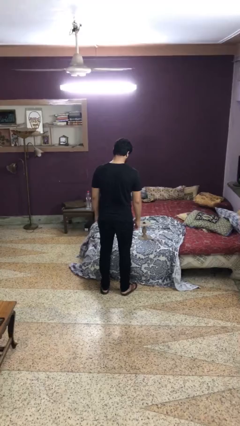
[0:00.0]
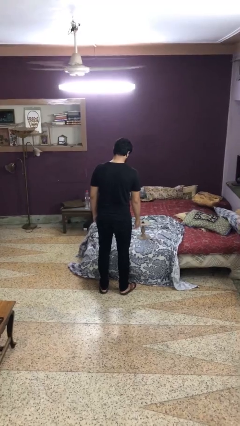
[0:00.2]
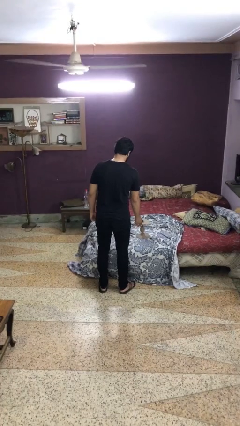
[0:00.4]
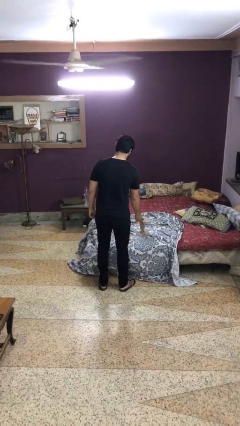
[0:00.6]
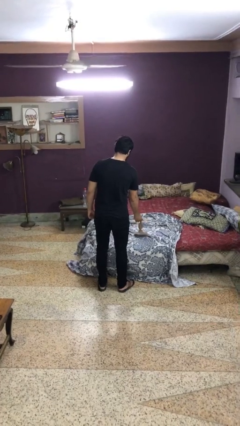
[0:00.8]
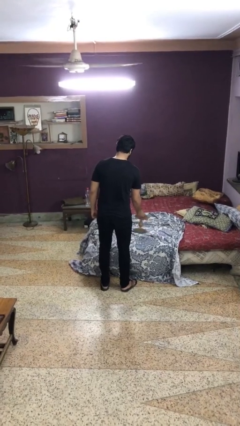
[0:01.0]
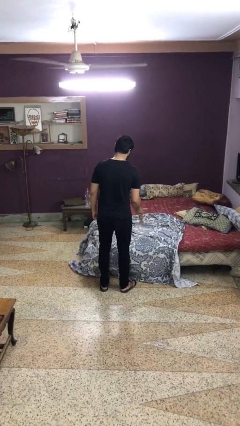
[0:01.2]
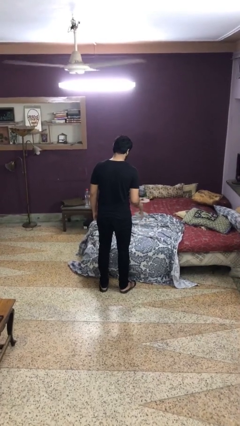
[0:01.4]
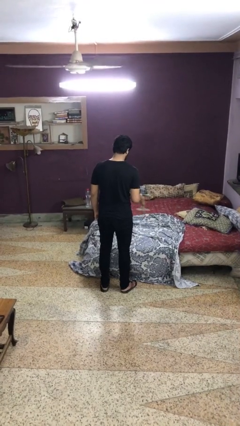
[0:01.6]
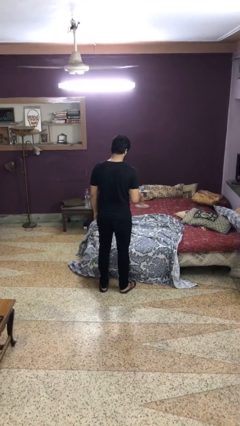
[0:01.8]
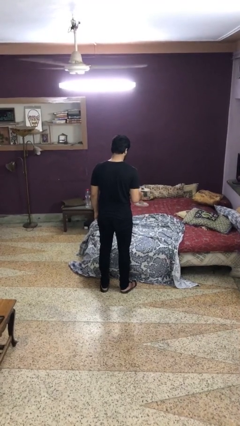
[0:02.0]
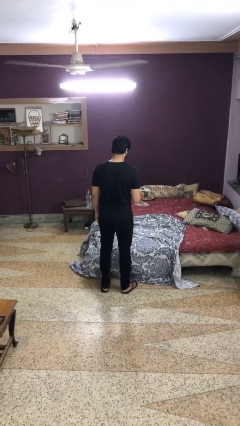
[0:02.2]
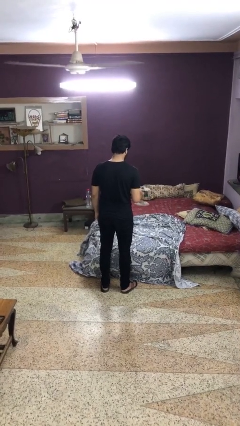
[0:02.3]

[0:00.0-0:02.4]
person picks up object from bed

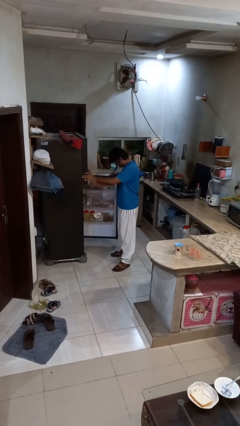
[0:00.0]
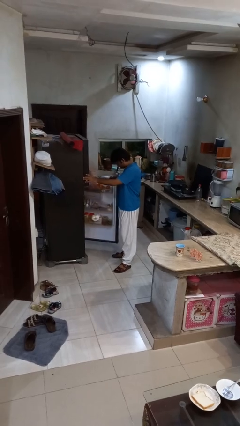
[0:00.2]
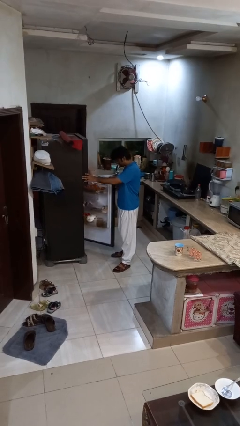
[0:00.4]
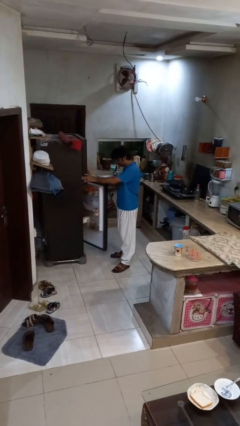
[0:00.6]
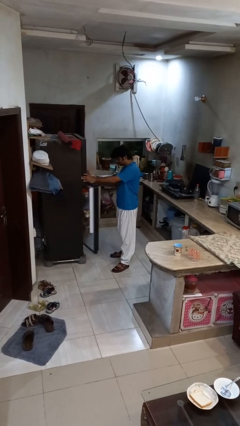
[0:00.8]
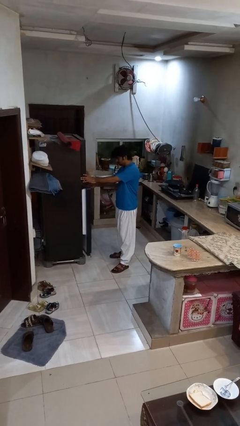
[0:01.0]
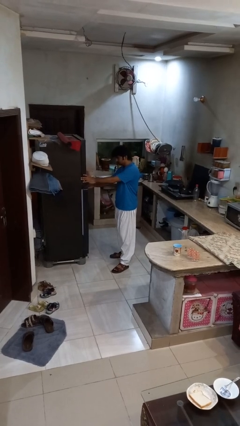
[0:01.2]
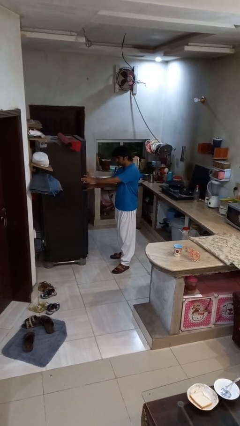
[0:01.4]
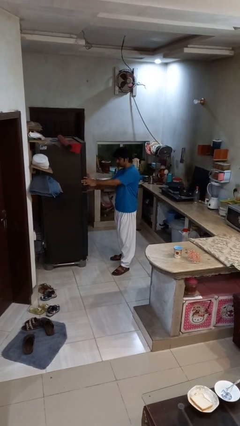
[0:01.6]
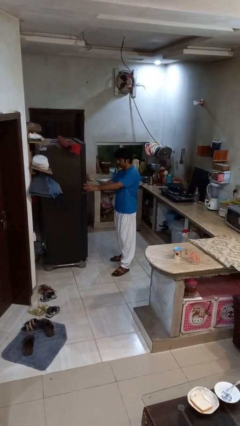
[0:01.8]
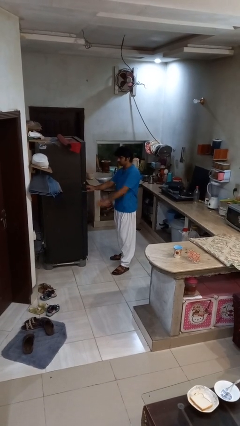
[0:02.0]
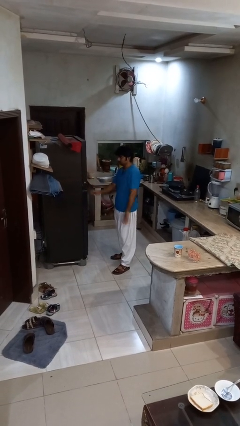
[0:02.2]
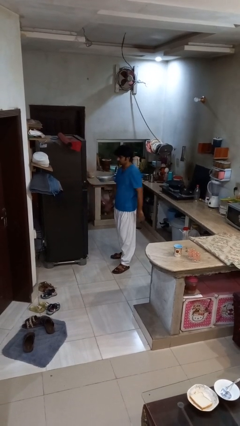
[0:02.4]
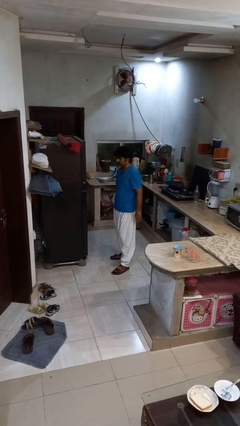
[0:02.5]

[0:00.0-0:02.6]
person closes refrigerator

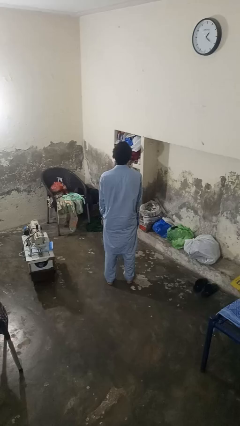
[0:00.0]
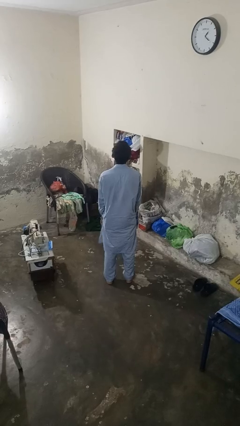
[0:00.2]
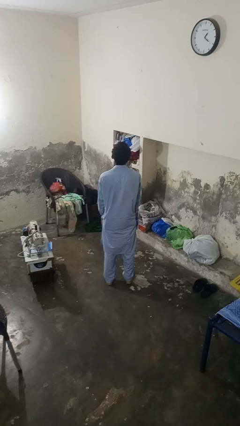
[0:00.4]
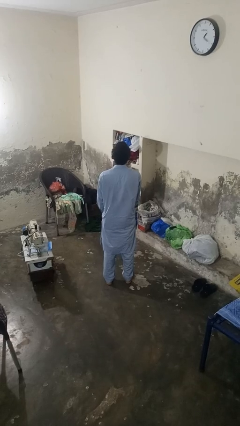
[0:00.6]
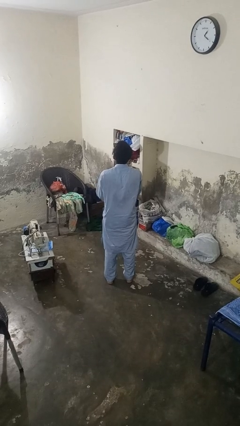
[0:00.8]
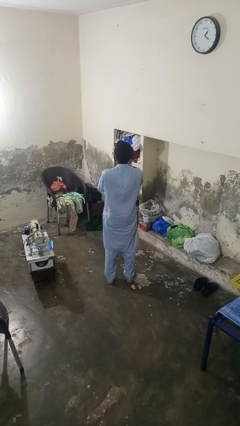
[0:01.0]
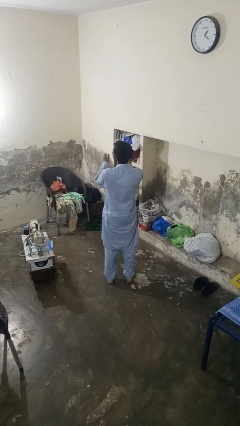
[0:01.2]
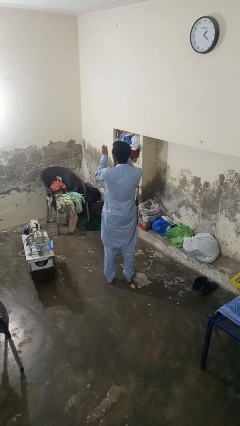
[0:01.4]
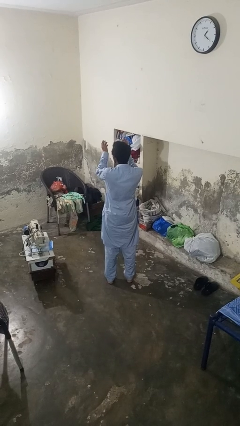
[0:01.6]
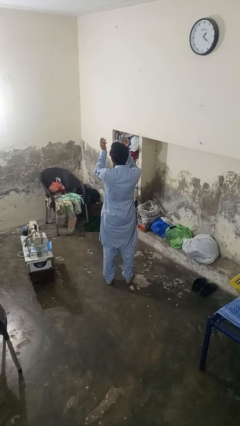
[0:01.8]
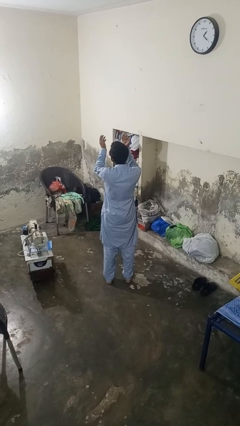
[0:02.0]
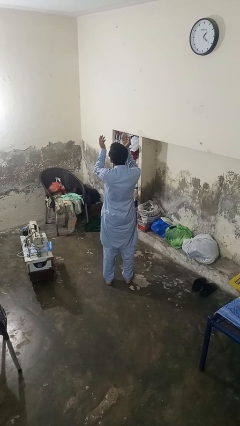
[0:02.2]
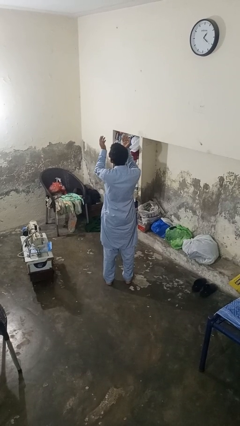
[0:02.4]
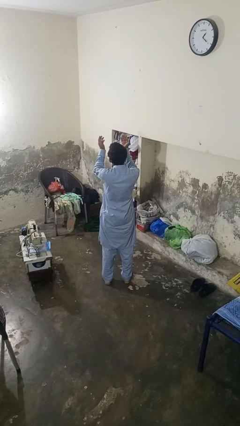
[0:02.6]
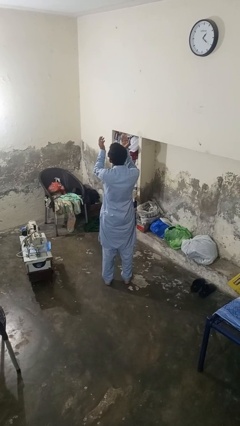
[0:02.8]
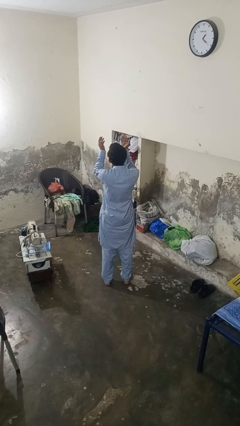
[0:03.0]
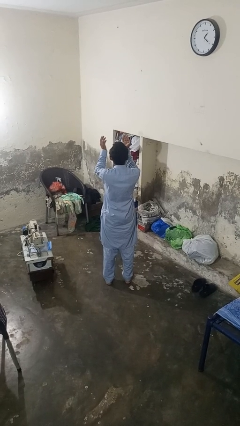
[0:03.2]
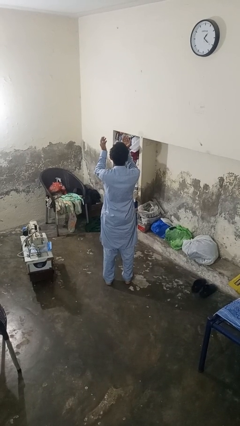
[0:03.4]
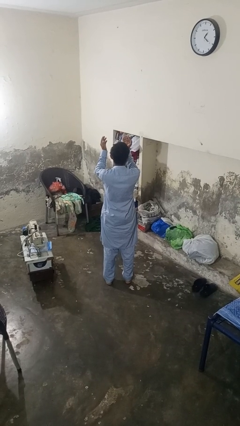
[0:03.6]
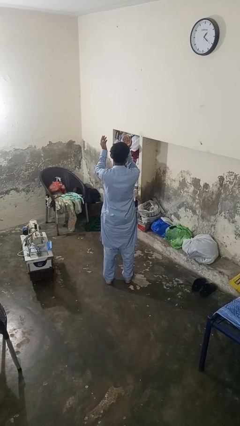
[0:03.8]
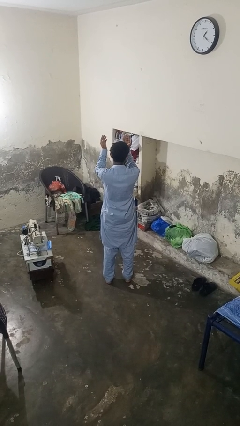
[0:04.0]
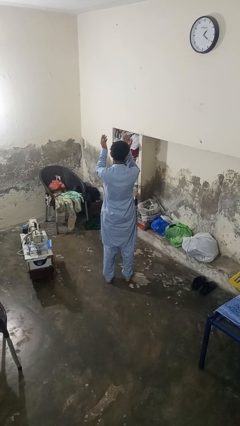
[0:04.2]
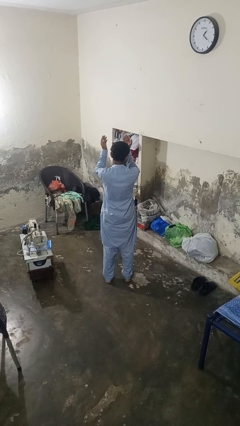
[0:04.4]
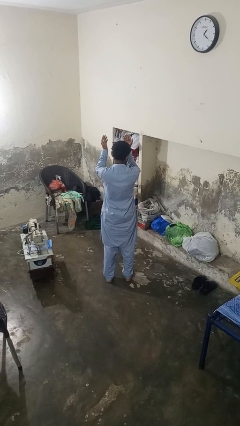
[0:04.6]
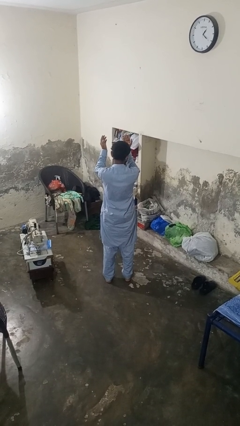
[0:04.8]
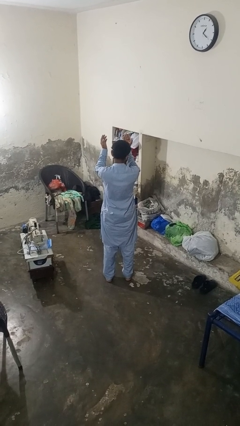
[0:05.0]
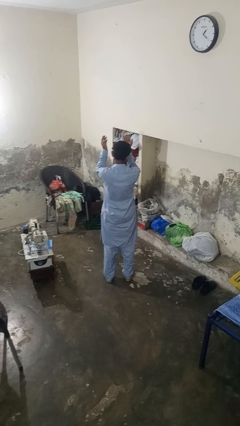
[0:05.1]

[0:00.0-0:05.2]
person prays

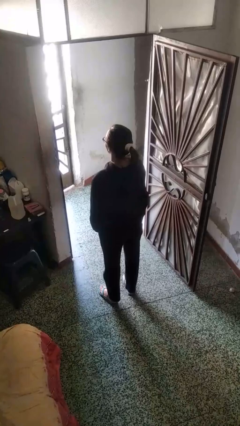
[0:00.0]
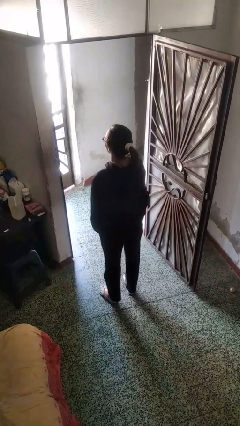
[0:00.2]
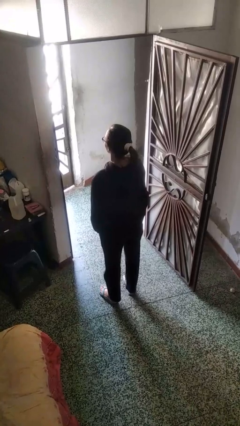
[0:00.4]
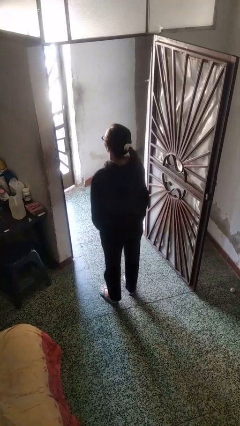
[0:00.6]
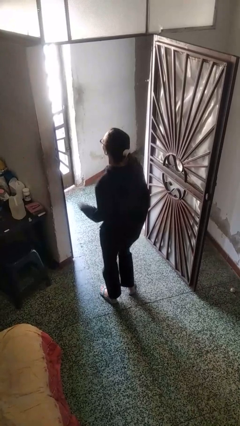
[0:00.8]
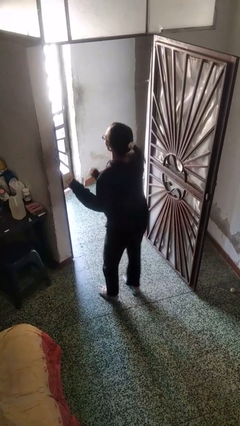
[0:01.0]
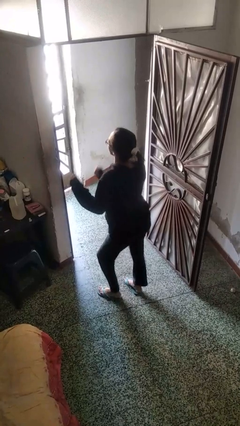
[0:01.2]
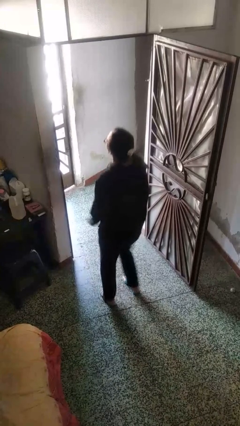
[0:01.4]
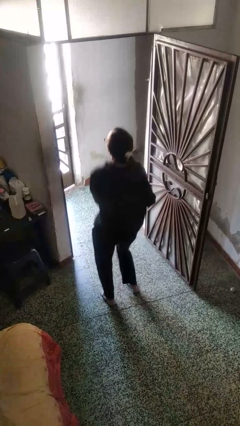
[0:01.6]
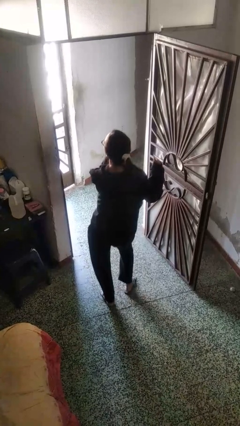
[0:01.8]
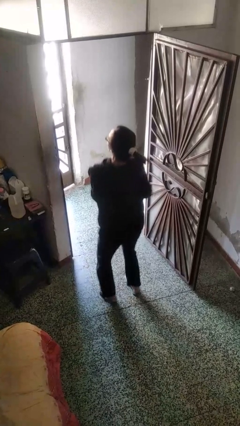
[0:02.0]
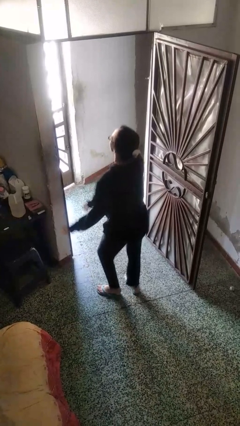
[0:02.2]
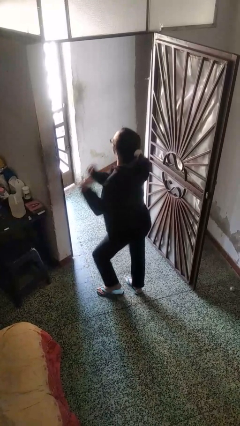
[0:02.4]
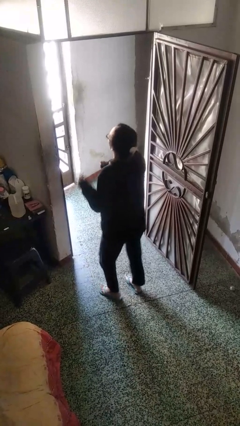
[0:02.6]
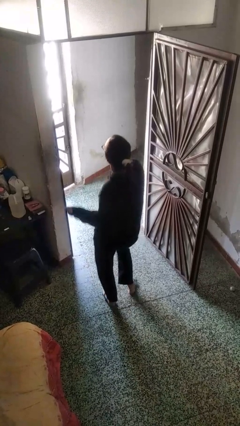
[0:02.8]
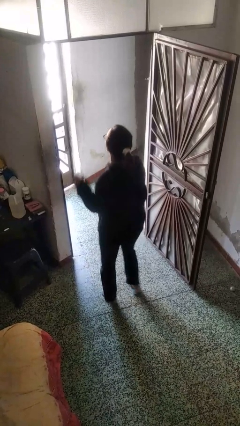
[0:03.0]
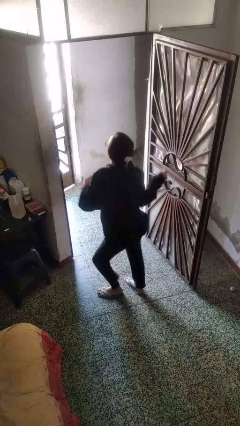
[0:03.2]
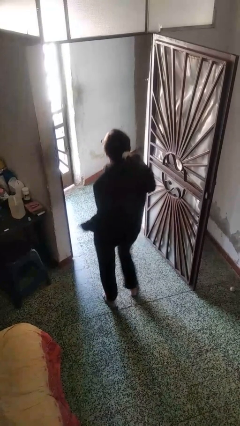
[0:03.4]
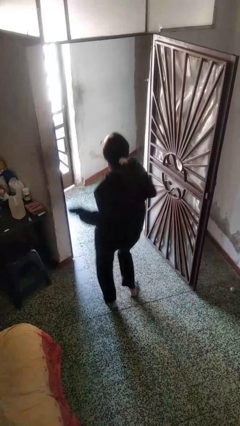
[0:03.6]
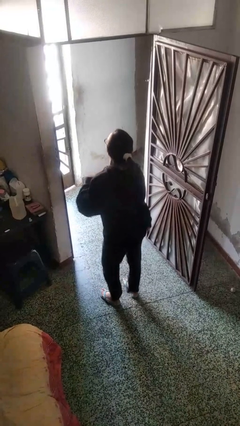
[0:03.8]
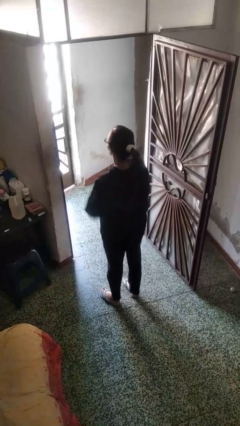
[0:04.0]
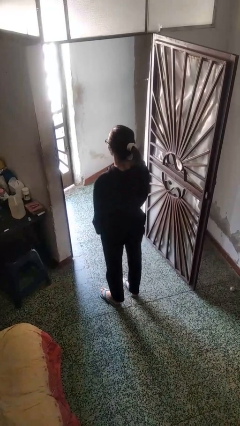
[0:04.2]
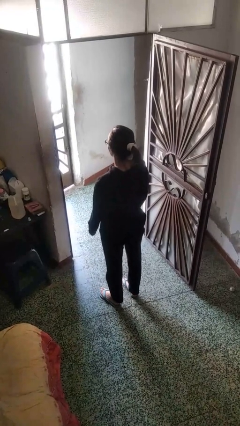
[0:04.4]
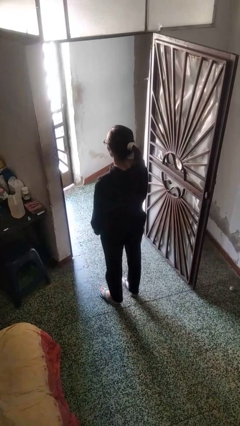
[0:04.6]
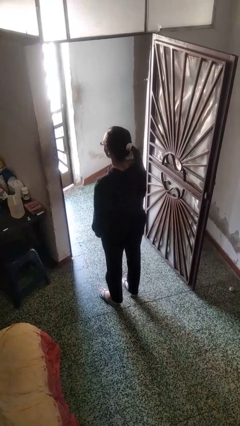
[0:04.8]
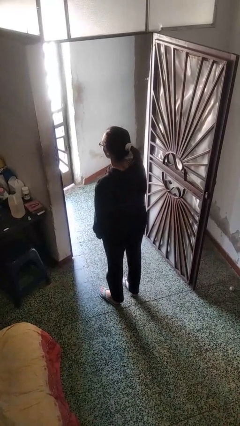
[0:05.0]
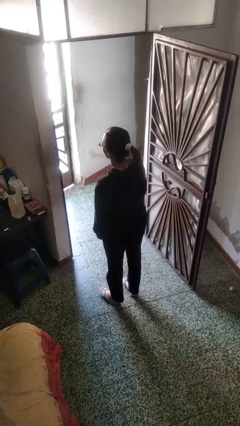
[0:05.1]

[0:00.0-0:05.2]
person dances in place

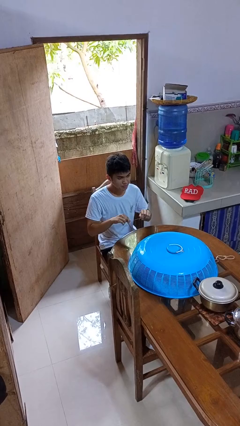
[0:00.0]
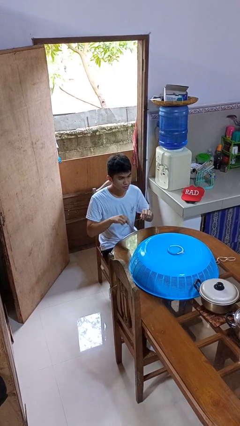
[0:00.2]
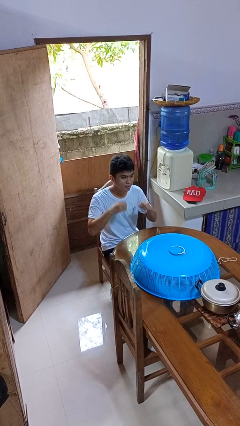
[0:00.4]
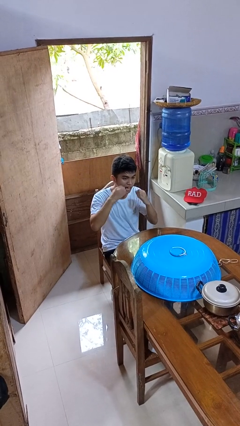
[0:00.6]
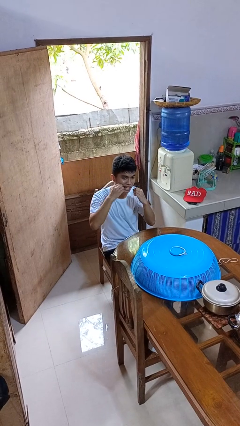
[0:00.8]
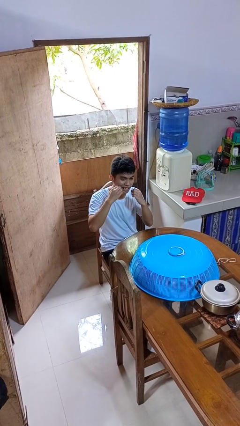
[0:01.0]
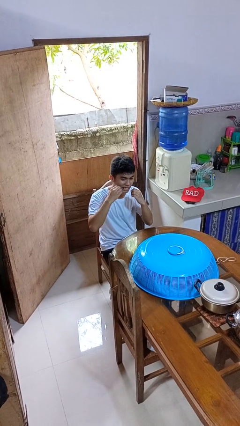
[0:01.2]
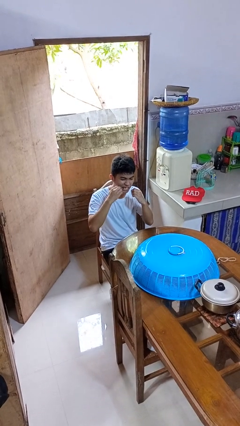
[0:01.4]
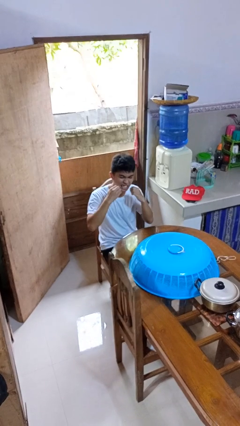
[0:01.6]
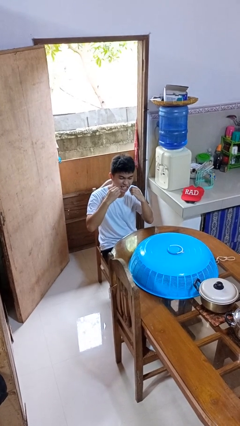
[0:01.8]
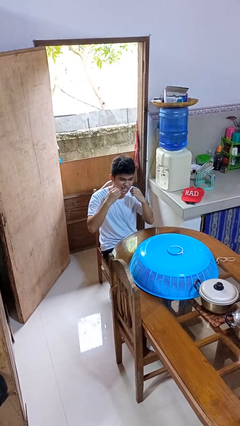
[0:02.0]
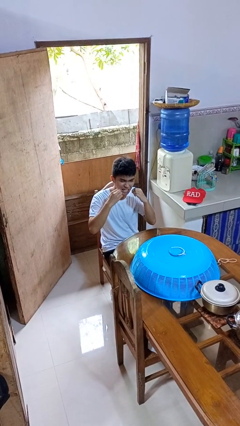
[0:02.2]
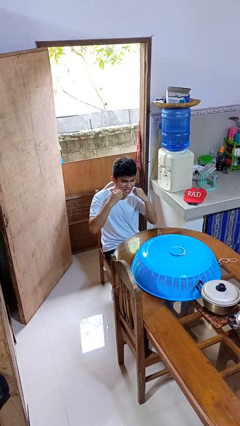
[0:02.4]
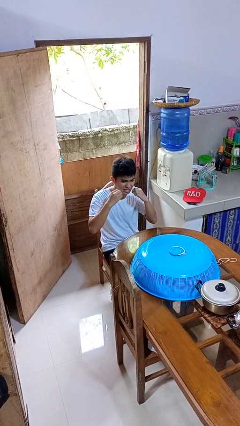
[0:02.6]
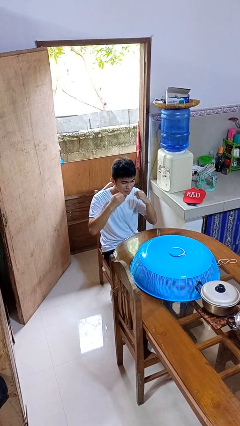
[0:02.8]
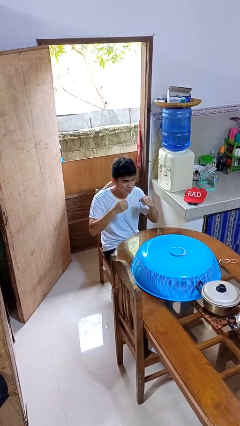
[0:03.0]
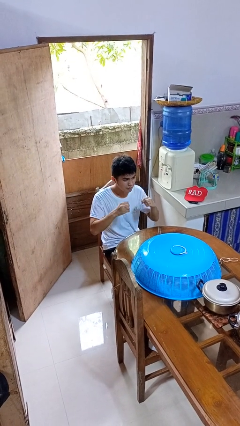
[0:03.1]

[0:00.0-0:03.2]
person flosses
